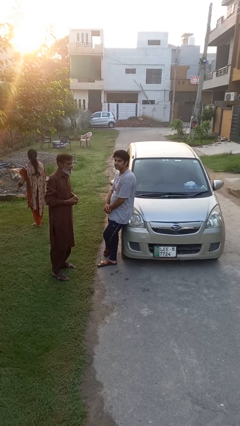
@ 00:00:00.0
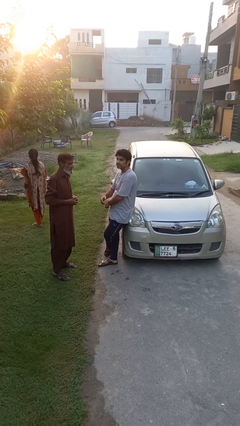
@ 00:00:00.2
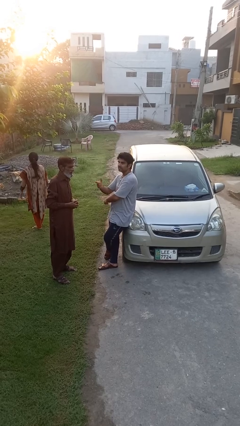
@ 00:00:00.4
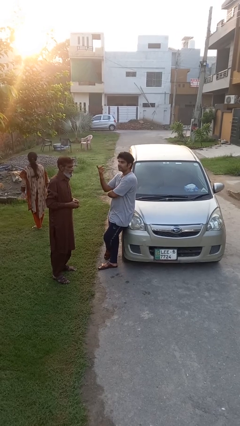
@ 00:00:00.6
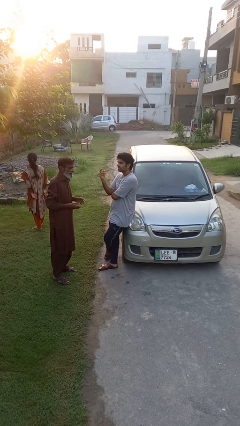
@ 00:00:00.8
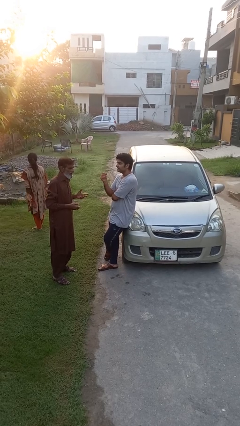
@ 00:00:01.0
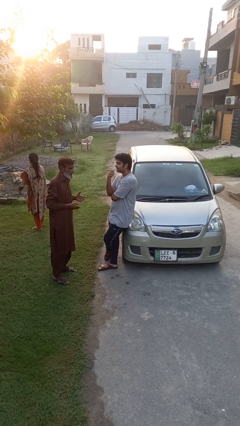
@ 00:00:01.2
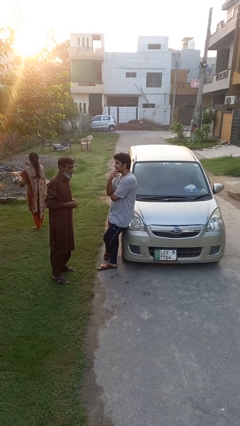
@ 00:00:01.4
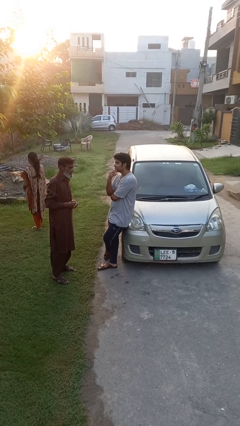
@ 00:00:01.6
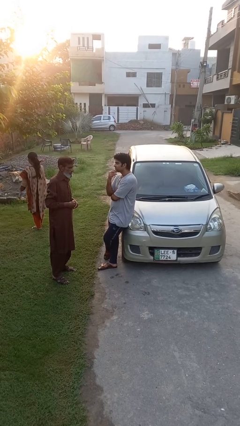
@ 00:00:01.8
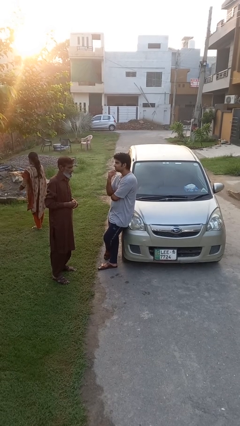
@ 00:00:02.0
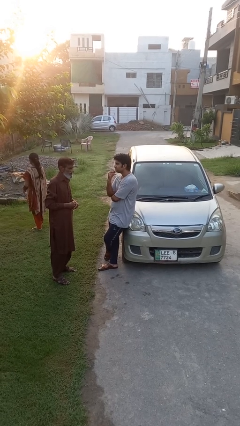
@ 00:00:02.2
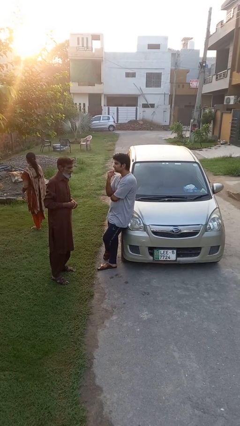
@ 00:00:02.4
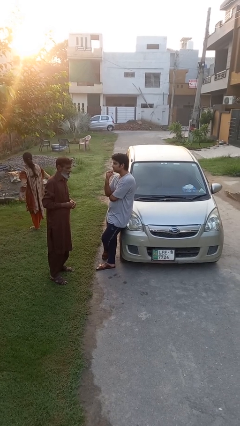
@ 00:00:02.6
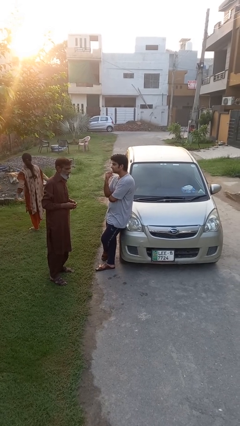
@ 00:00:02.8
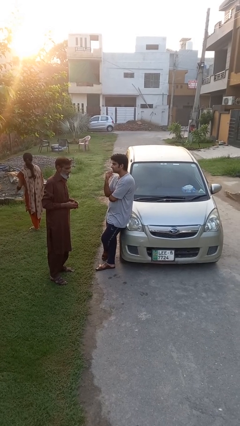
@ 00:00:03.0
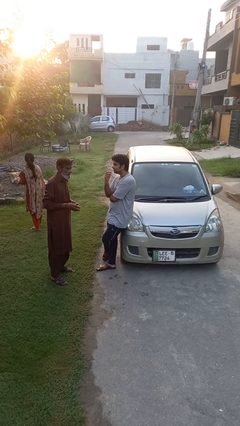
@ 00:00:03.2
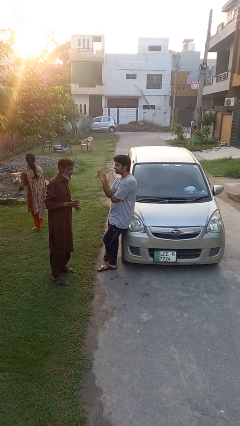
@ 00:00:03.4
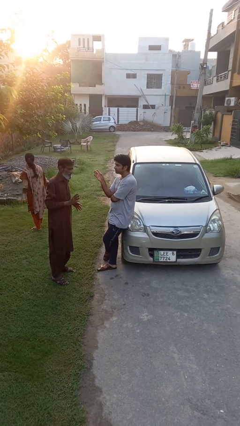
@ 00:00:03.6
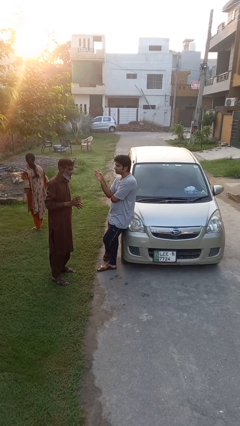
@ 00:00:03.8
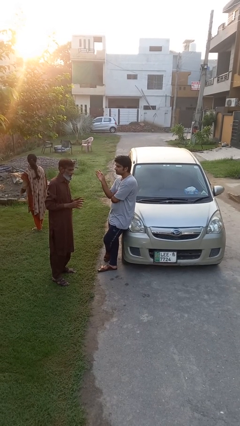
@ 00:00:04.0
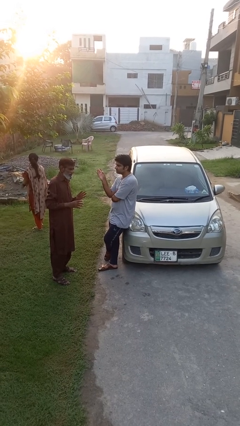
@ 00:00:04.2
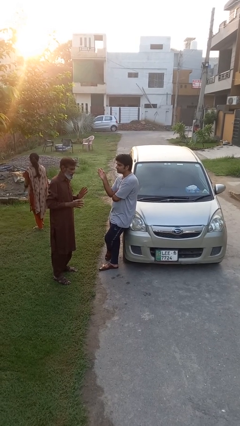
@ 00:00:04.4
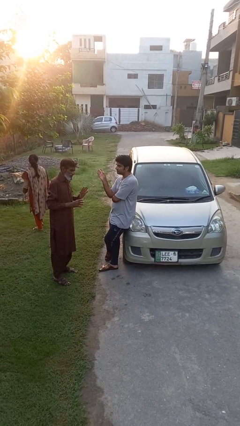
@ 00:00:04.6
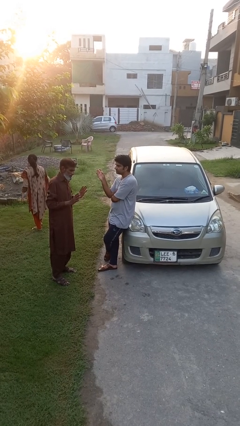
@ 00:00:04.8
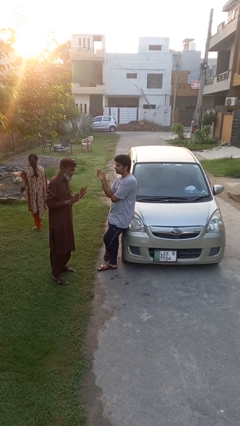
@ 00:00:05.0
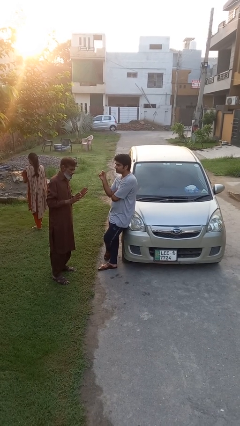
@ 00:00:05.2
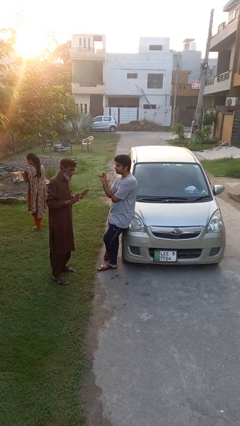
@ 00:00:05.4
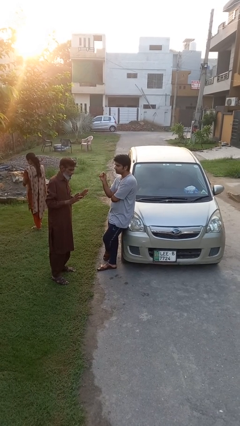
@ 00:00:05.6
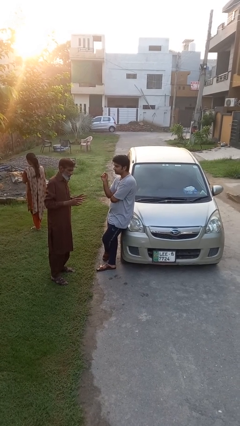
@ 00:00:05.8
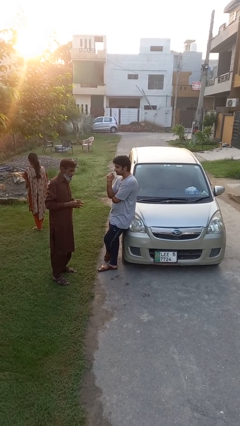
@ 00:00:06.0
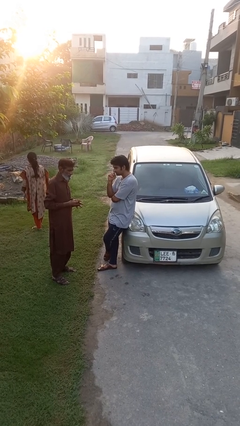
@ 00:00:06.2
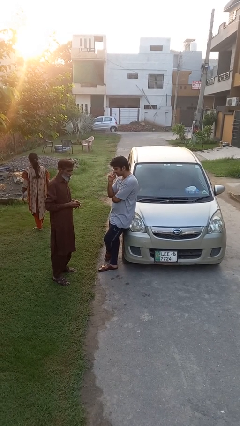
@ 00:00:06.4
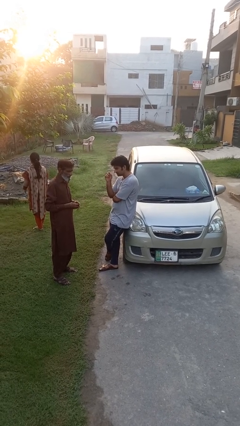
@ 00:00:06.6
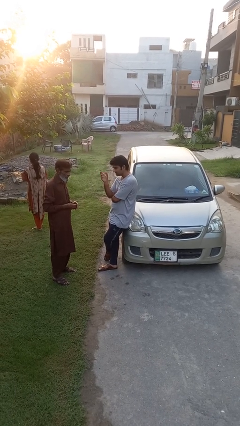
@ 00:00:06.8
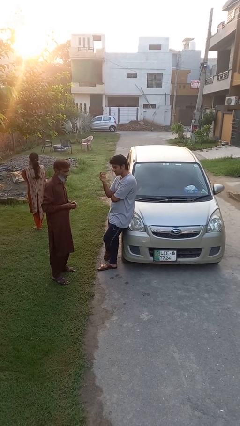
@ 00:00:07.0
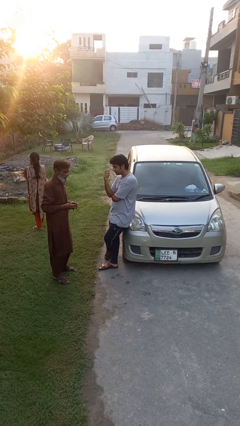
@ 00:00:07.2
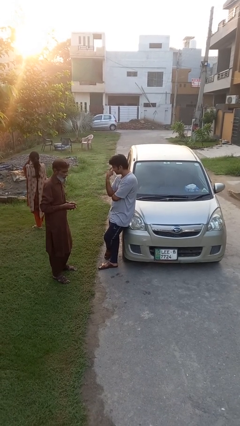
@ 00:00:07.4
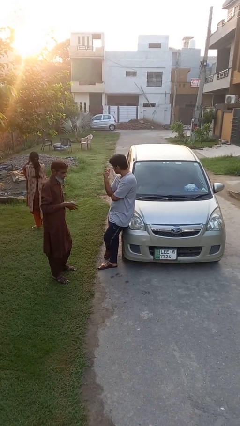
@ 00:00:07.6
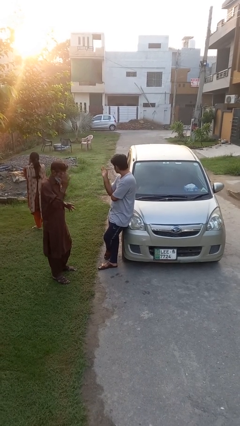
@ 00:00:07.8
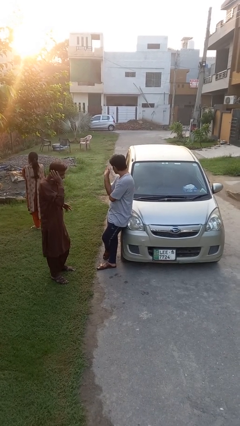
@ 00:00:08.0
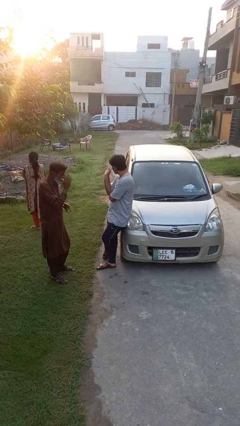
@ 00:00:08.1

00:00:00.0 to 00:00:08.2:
person talks to person

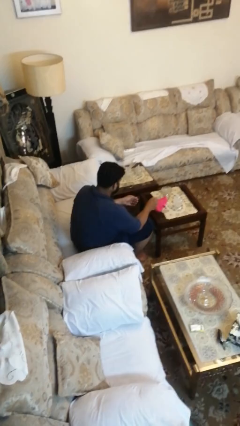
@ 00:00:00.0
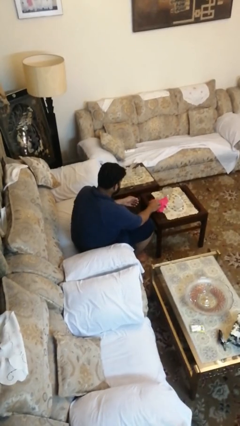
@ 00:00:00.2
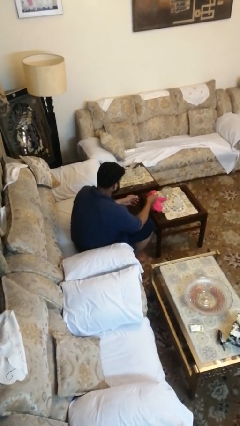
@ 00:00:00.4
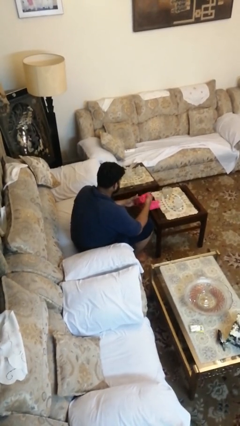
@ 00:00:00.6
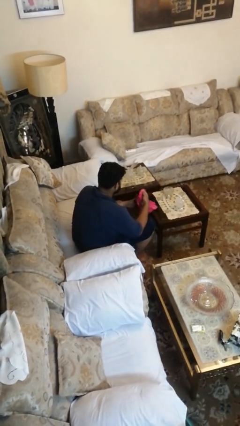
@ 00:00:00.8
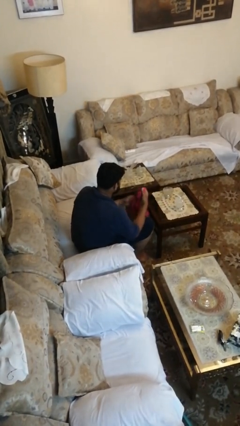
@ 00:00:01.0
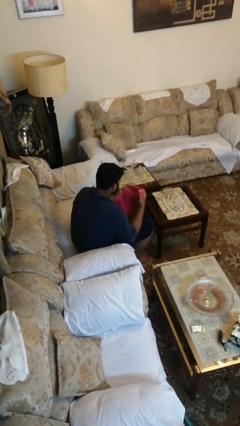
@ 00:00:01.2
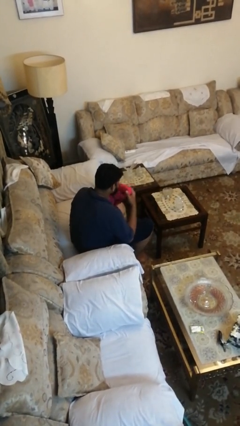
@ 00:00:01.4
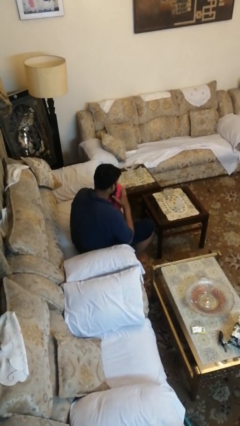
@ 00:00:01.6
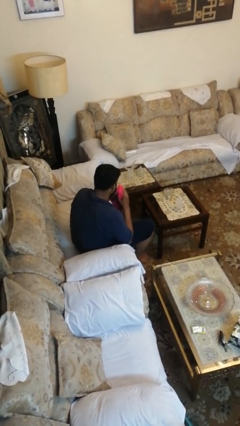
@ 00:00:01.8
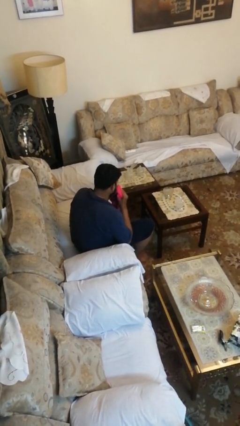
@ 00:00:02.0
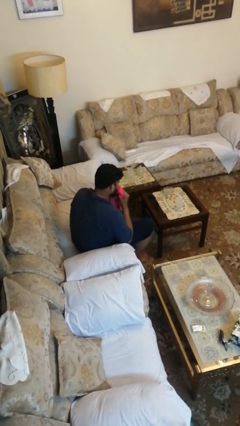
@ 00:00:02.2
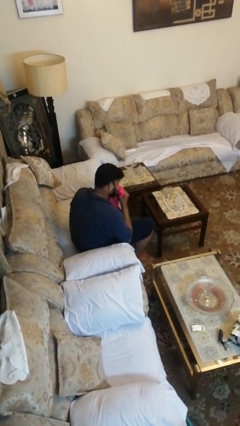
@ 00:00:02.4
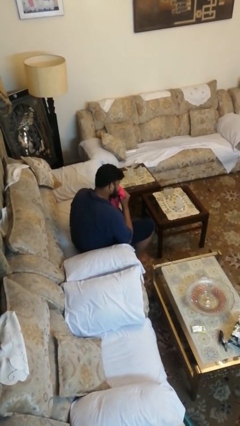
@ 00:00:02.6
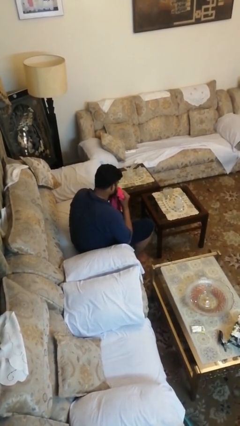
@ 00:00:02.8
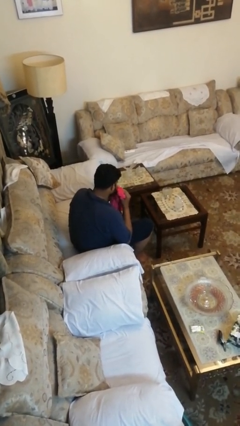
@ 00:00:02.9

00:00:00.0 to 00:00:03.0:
person wipes mouth with napkin

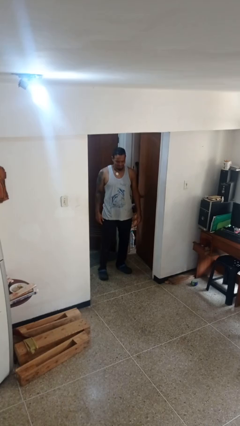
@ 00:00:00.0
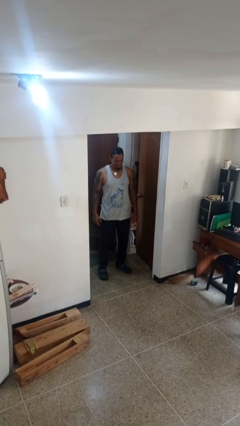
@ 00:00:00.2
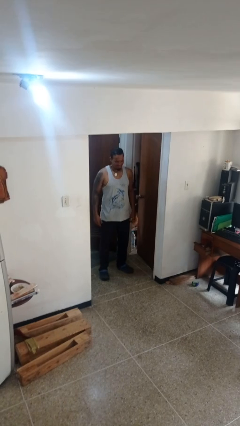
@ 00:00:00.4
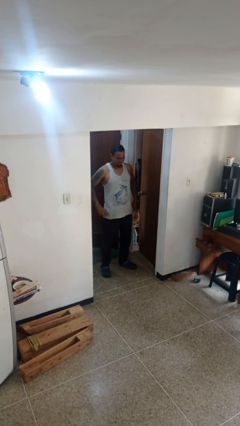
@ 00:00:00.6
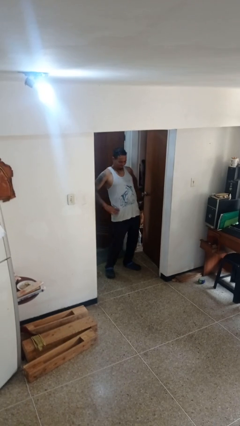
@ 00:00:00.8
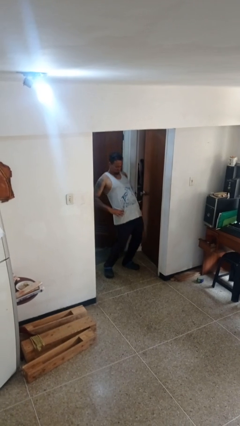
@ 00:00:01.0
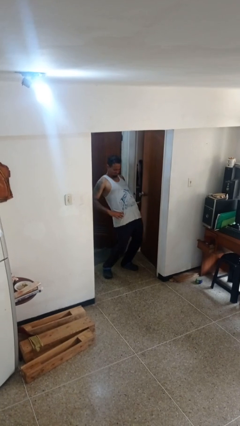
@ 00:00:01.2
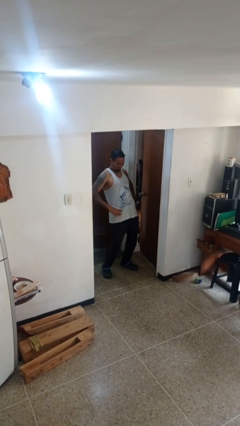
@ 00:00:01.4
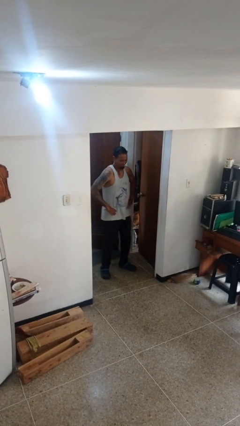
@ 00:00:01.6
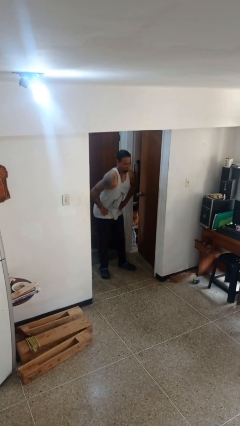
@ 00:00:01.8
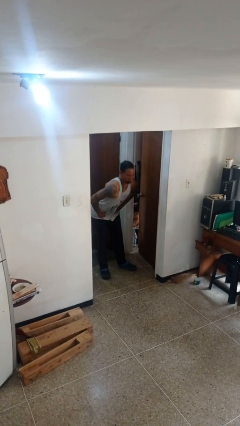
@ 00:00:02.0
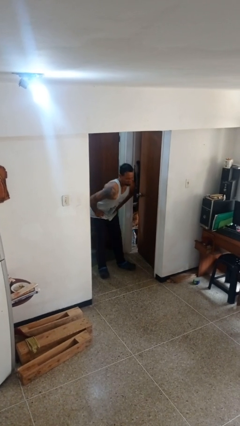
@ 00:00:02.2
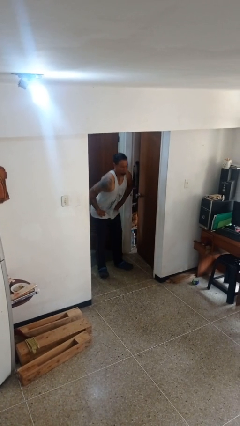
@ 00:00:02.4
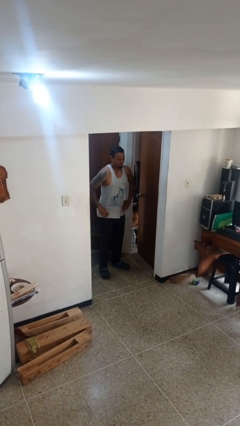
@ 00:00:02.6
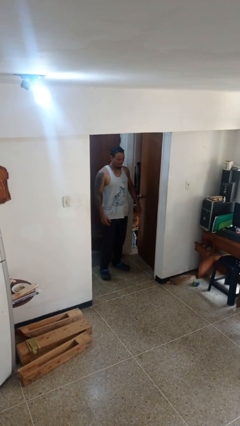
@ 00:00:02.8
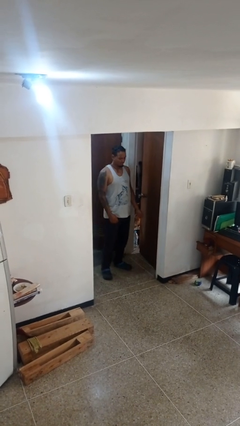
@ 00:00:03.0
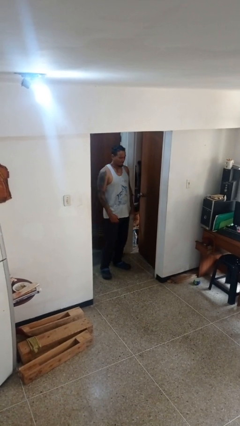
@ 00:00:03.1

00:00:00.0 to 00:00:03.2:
person wiggles hips

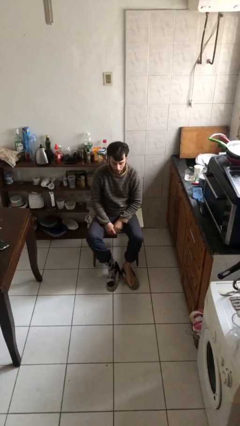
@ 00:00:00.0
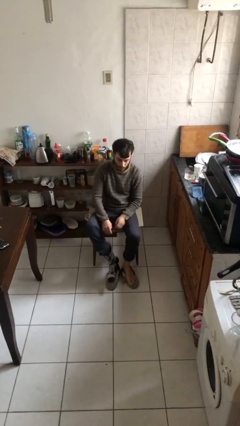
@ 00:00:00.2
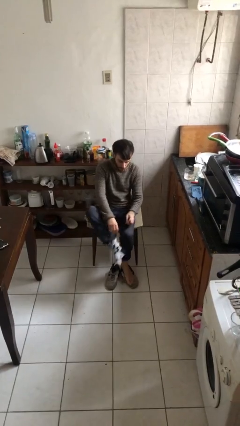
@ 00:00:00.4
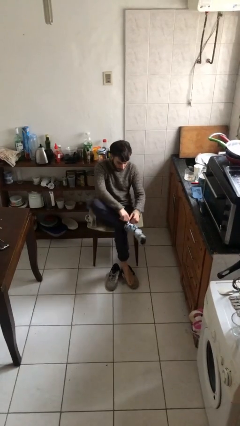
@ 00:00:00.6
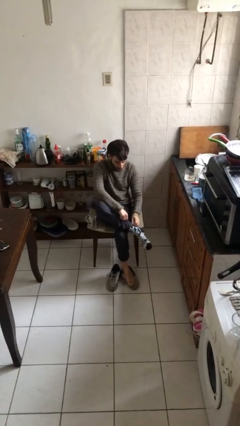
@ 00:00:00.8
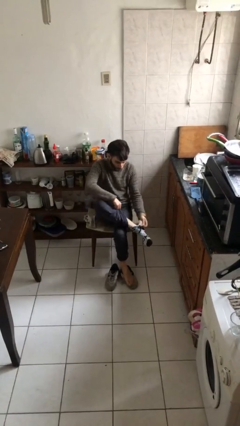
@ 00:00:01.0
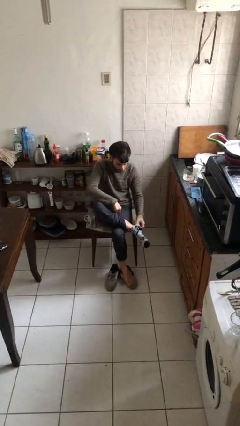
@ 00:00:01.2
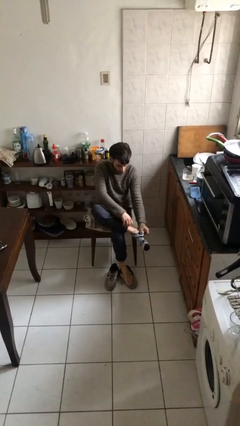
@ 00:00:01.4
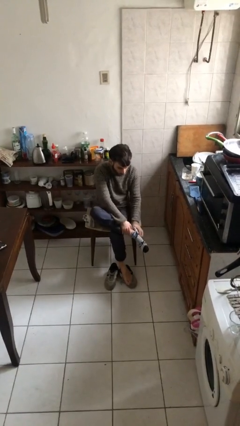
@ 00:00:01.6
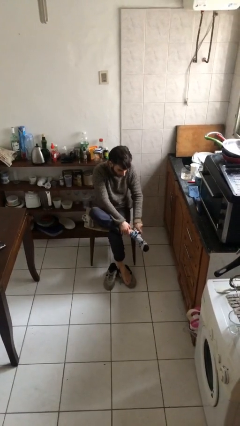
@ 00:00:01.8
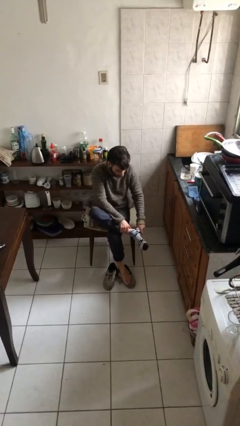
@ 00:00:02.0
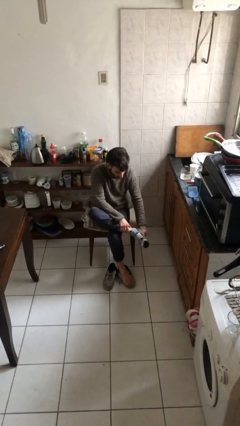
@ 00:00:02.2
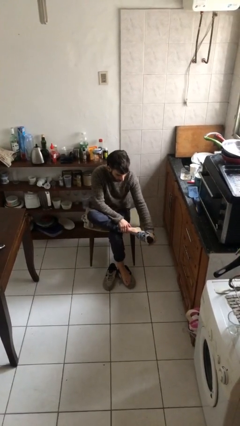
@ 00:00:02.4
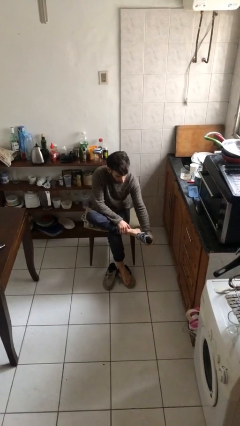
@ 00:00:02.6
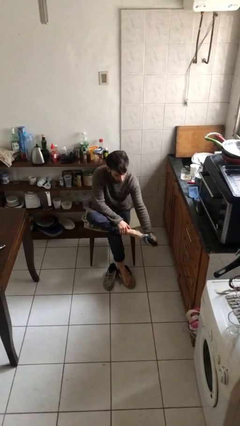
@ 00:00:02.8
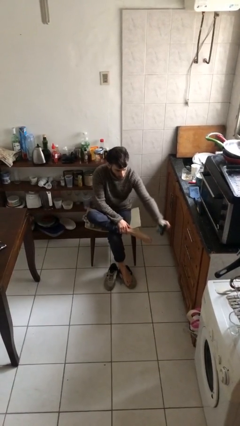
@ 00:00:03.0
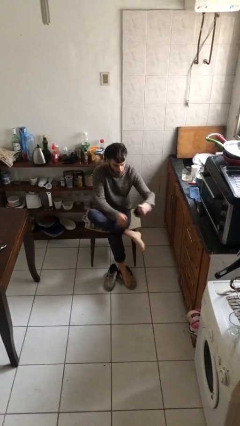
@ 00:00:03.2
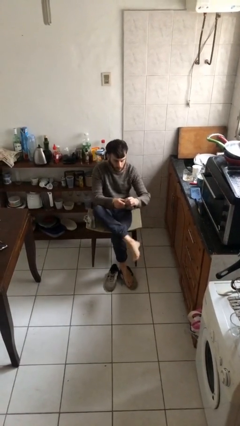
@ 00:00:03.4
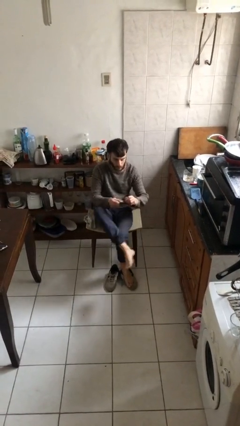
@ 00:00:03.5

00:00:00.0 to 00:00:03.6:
person takes off socks
